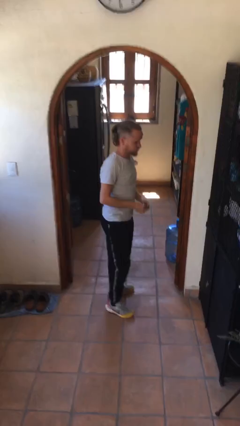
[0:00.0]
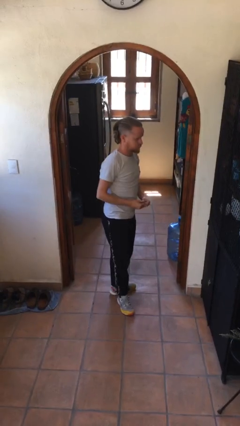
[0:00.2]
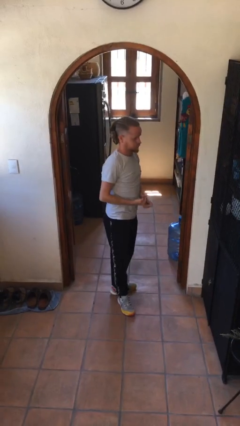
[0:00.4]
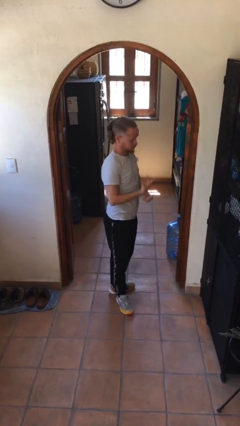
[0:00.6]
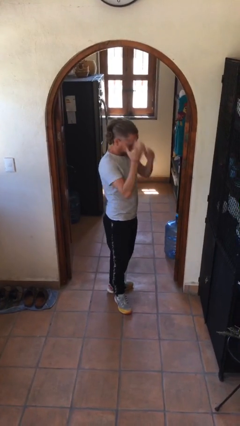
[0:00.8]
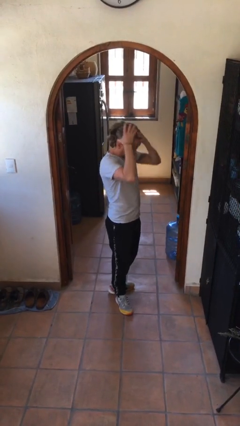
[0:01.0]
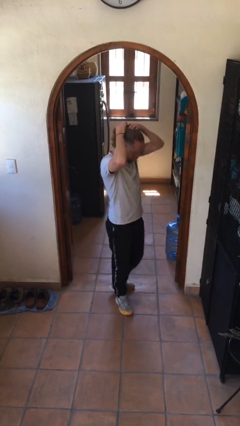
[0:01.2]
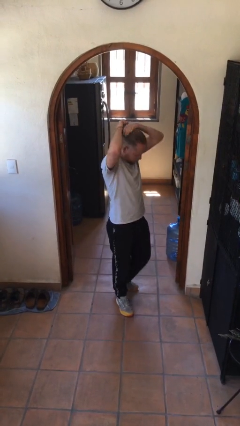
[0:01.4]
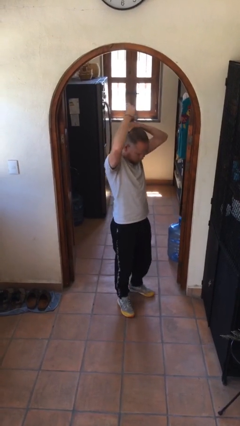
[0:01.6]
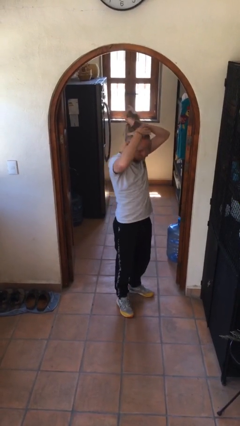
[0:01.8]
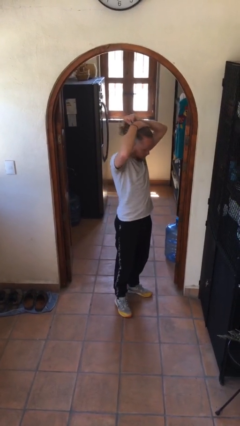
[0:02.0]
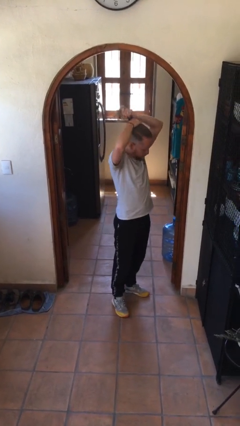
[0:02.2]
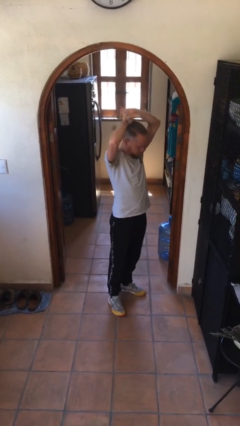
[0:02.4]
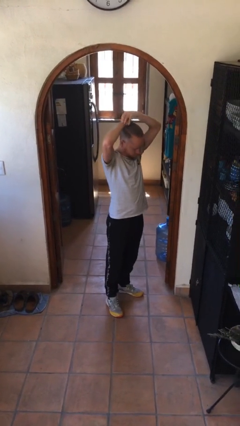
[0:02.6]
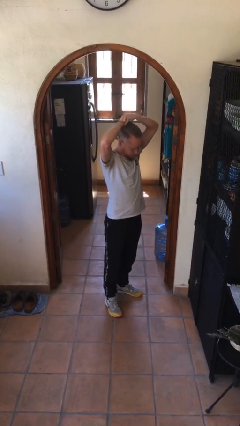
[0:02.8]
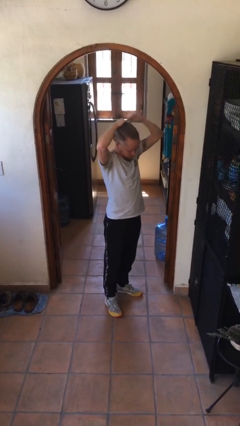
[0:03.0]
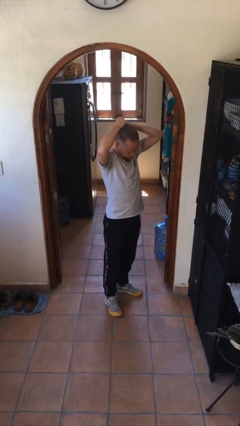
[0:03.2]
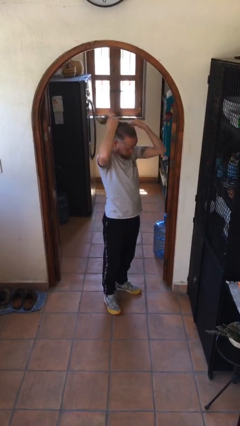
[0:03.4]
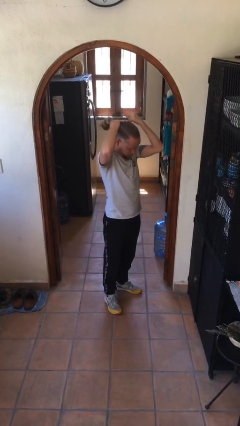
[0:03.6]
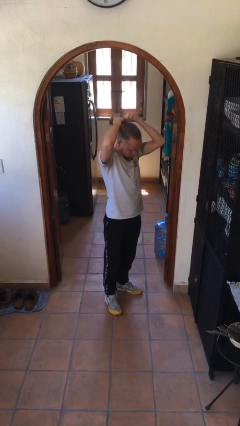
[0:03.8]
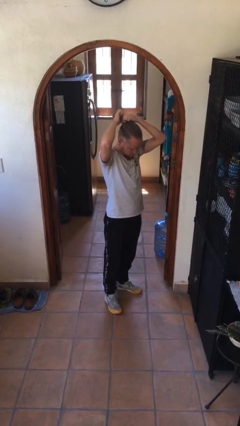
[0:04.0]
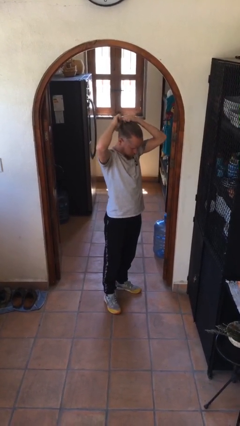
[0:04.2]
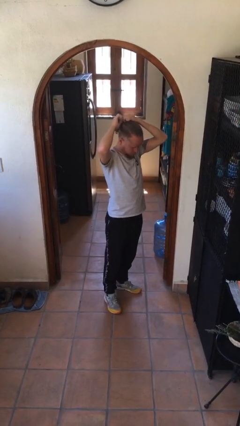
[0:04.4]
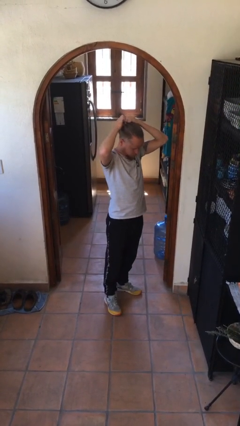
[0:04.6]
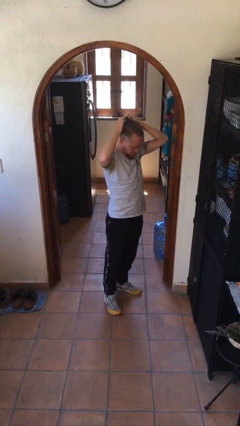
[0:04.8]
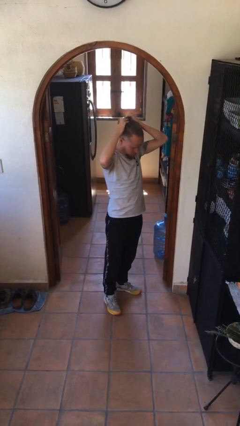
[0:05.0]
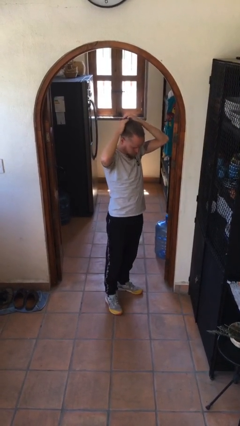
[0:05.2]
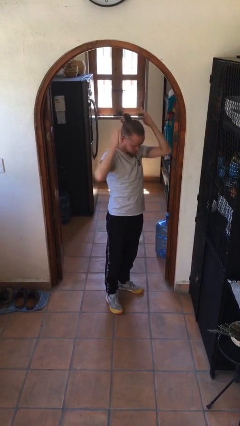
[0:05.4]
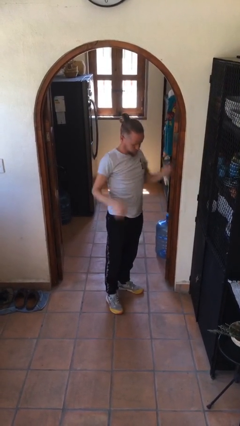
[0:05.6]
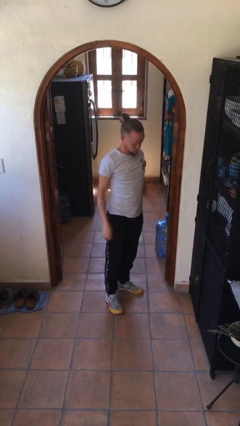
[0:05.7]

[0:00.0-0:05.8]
person puts hair in ponytail

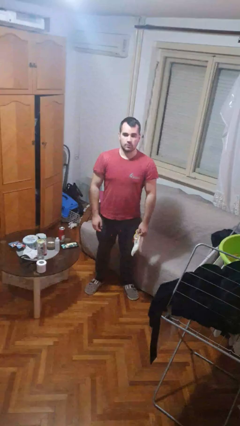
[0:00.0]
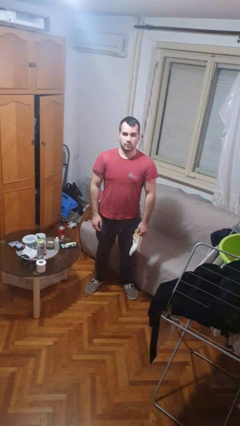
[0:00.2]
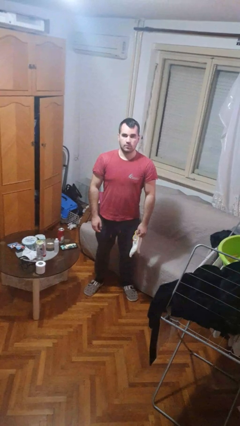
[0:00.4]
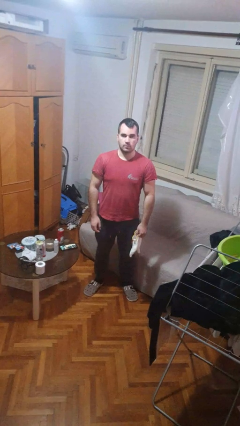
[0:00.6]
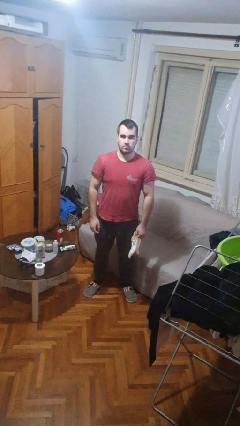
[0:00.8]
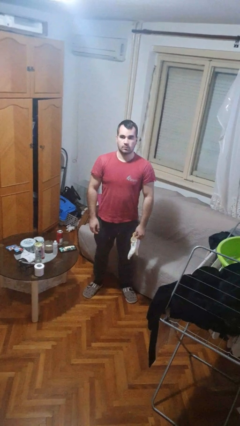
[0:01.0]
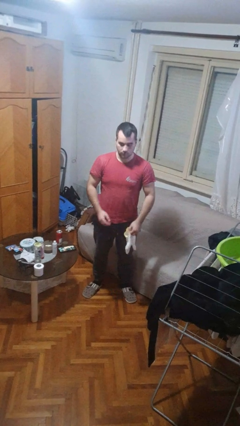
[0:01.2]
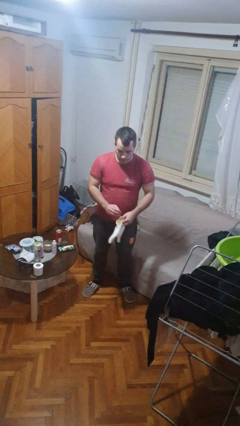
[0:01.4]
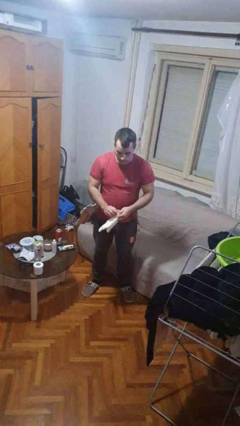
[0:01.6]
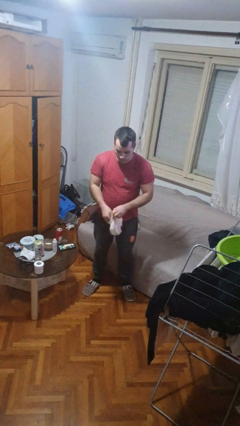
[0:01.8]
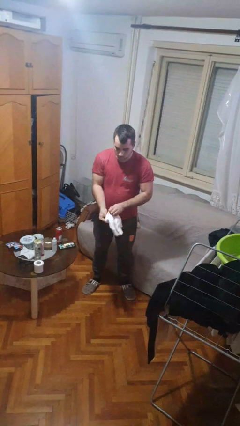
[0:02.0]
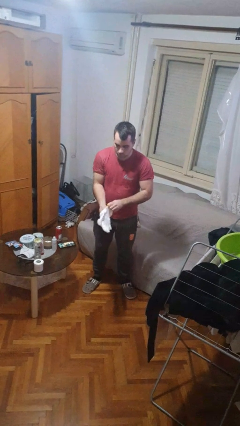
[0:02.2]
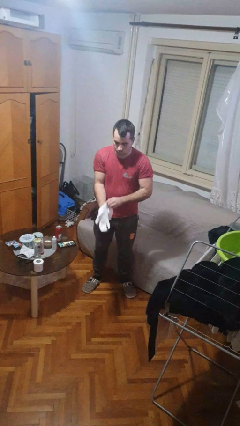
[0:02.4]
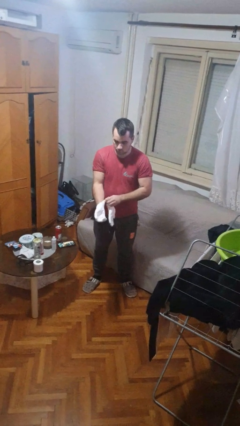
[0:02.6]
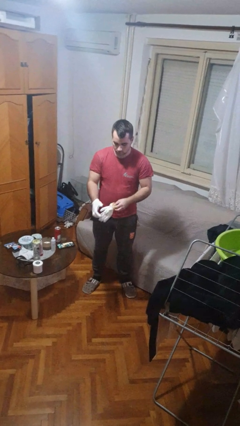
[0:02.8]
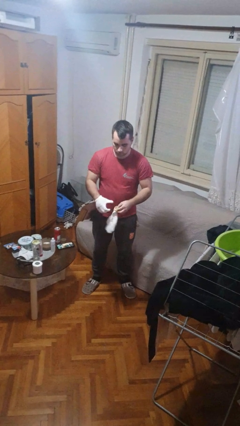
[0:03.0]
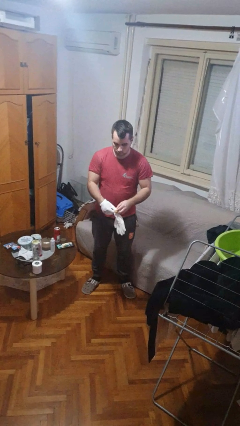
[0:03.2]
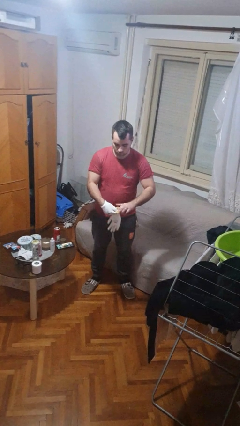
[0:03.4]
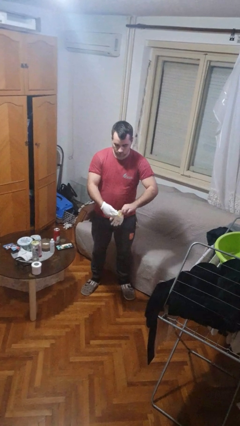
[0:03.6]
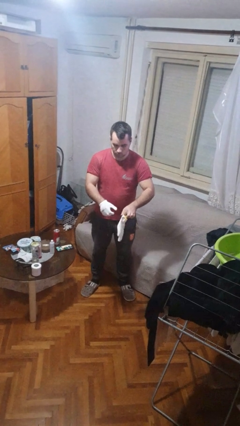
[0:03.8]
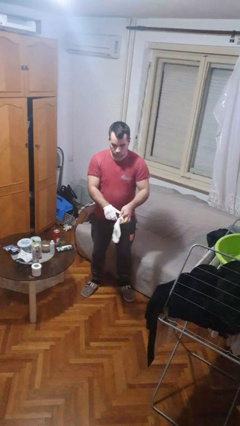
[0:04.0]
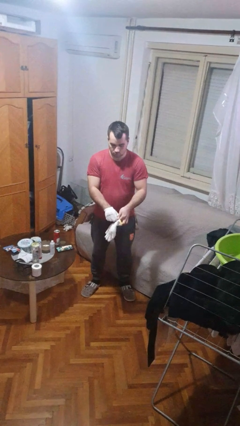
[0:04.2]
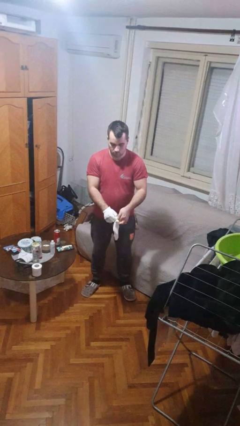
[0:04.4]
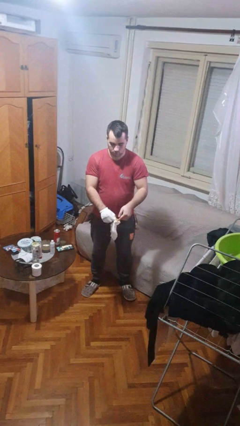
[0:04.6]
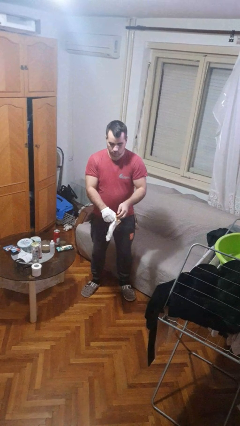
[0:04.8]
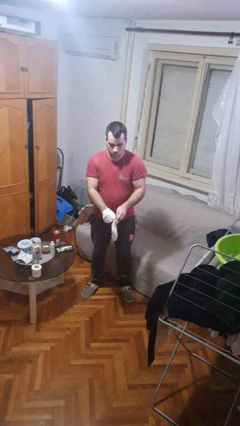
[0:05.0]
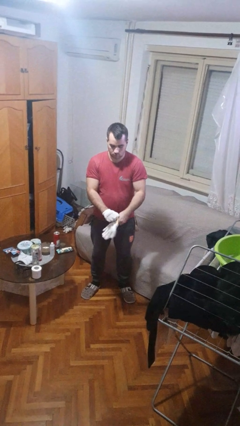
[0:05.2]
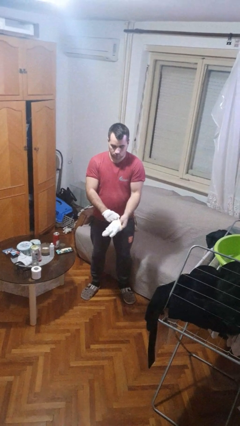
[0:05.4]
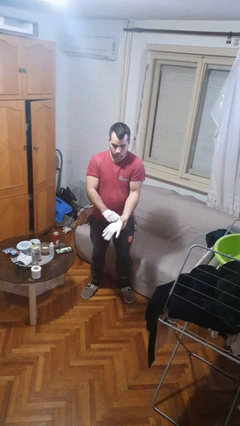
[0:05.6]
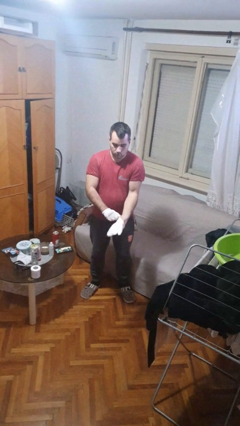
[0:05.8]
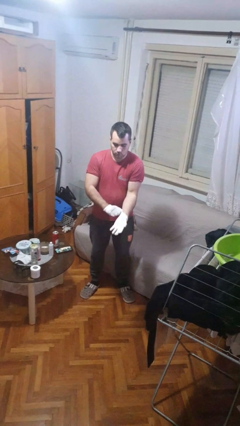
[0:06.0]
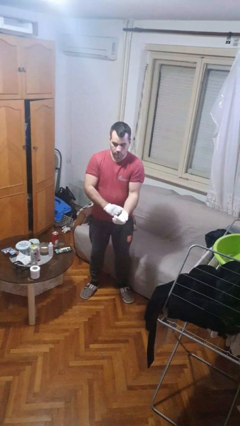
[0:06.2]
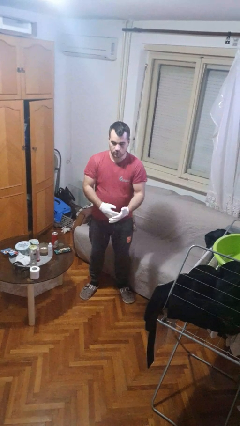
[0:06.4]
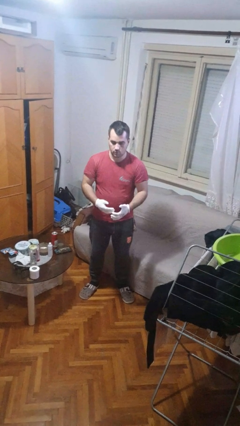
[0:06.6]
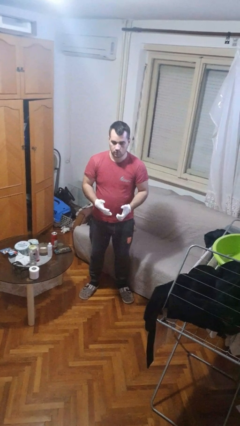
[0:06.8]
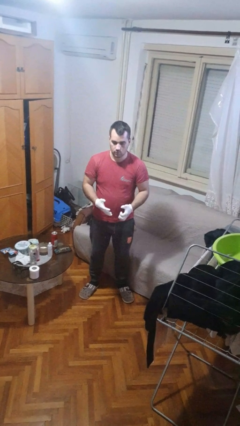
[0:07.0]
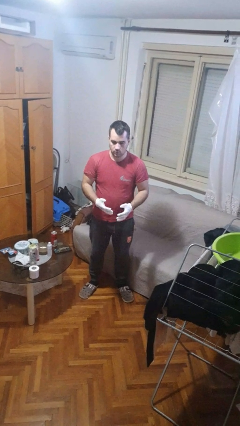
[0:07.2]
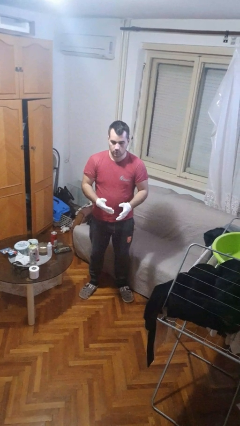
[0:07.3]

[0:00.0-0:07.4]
person puts on gloves

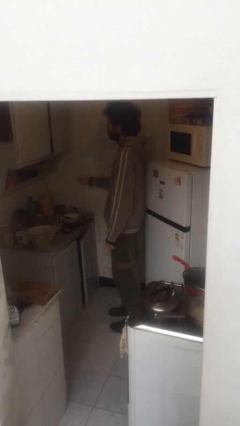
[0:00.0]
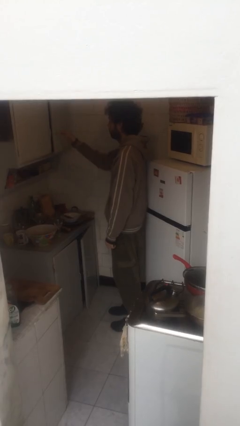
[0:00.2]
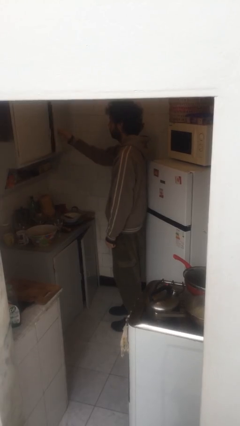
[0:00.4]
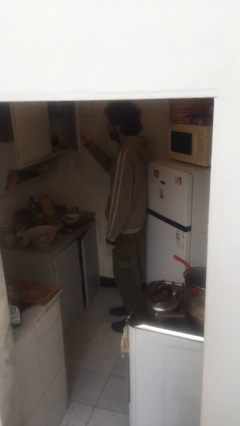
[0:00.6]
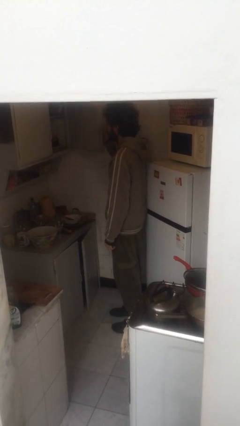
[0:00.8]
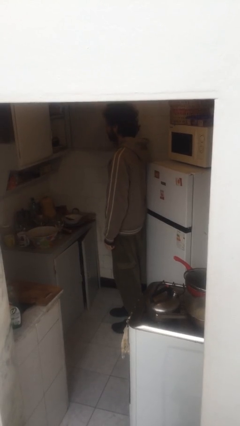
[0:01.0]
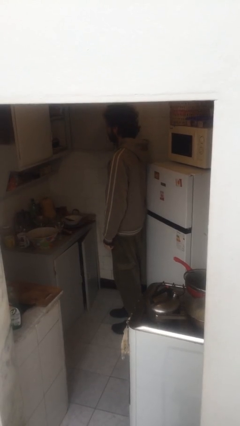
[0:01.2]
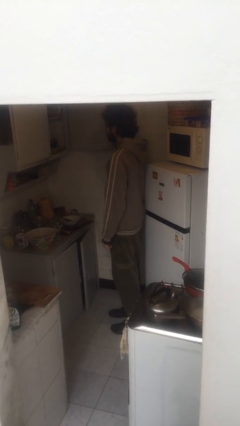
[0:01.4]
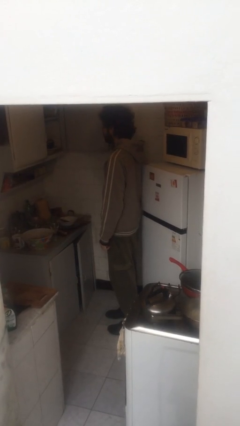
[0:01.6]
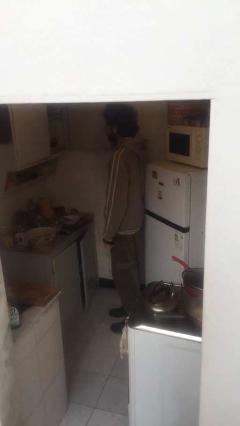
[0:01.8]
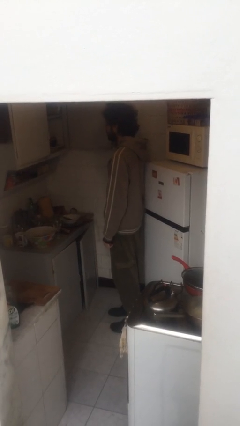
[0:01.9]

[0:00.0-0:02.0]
person opens cabinet

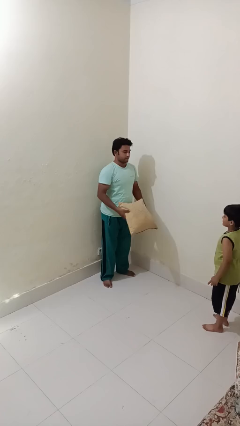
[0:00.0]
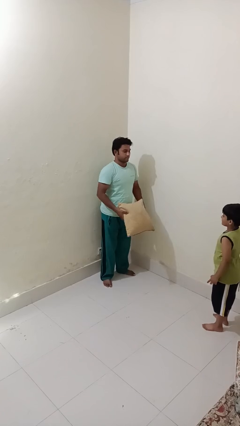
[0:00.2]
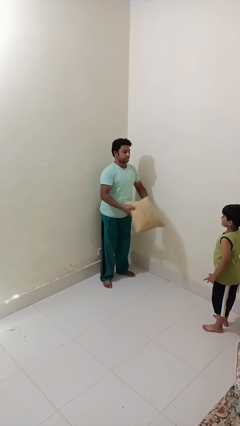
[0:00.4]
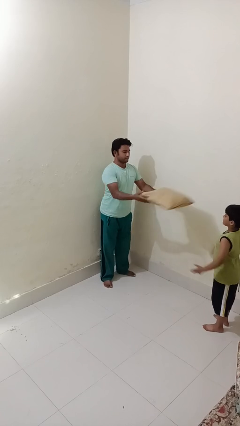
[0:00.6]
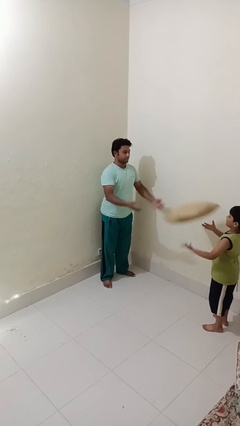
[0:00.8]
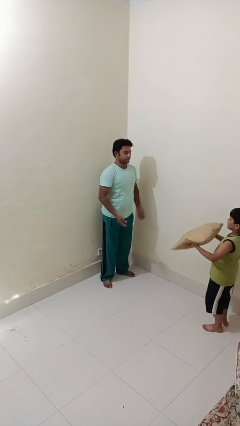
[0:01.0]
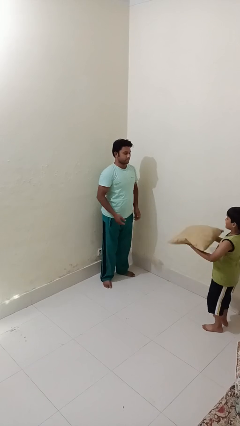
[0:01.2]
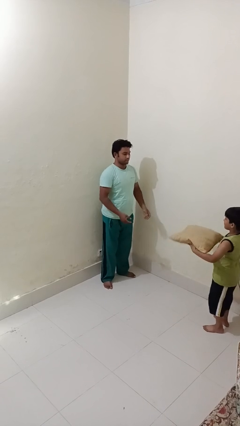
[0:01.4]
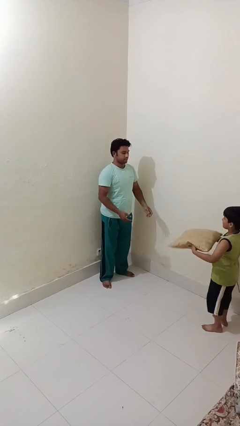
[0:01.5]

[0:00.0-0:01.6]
person throws object to person

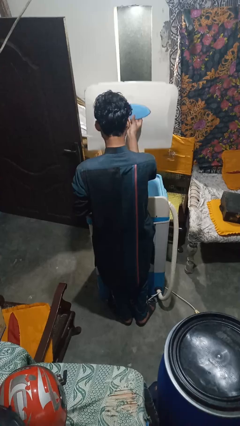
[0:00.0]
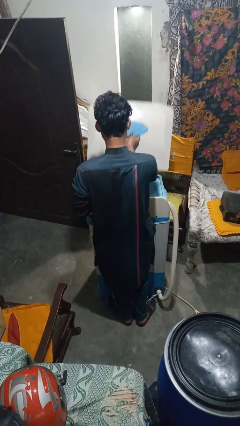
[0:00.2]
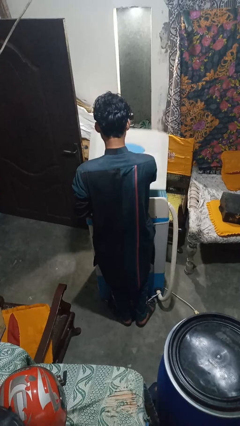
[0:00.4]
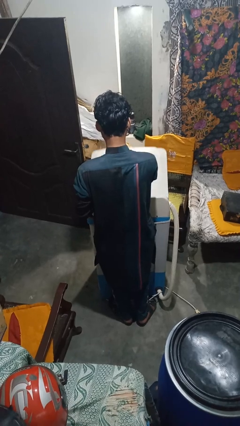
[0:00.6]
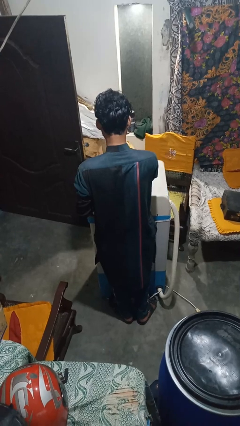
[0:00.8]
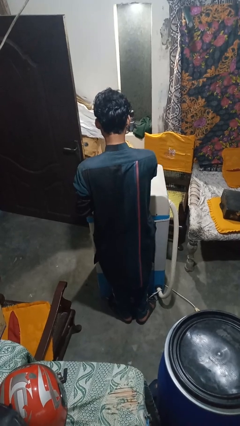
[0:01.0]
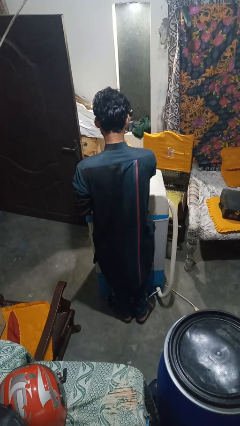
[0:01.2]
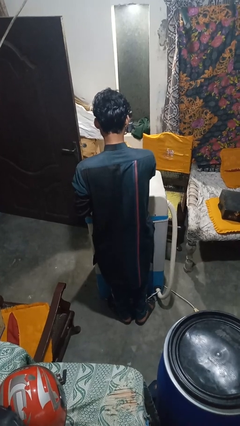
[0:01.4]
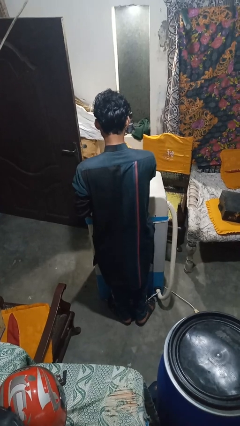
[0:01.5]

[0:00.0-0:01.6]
person closes clothes washer
